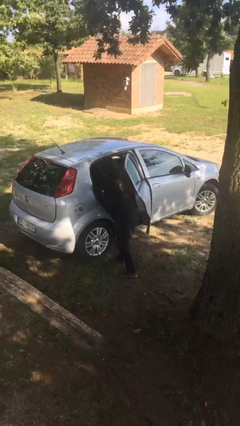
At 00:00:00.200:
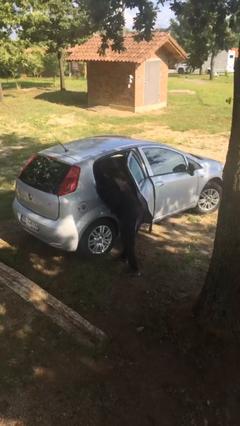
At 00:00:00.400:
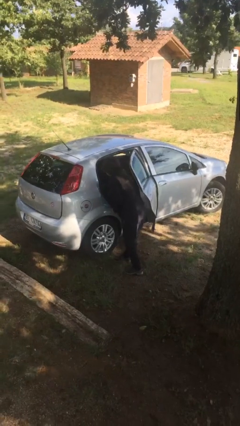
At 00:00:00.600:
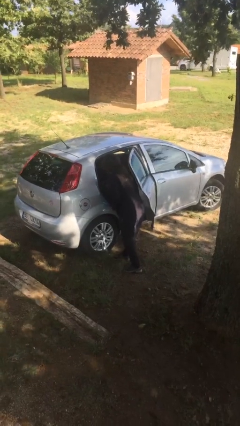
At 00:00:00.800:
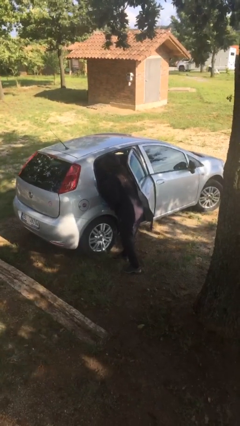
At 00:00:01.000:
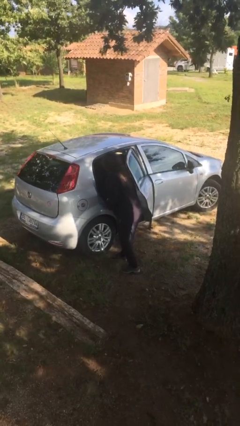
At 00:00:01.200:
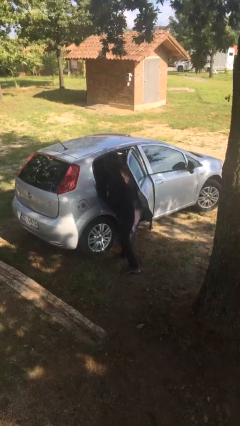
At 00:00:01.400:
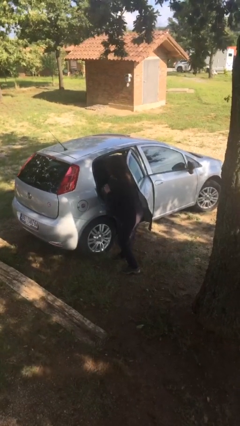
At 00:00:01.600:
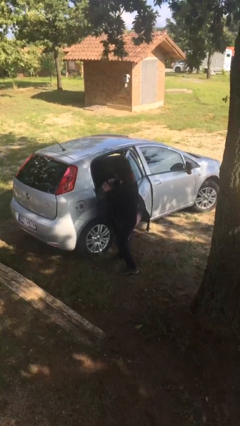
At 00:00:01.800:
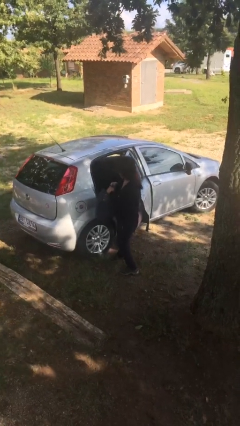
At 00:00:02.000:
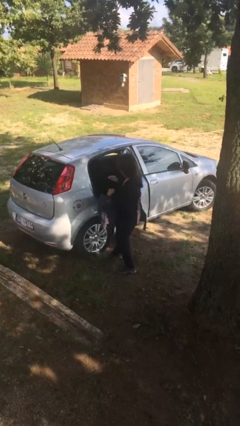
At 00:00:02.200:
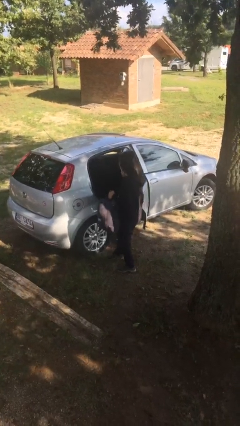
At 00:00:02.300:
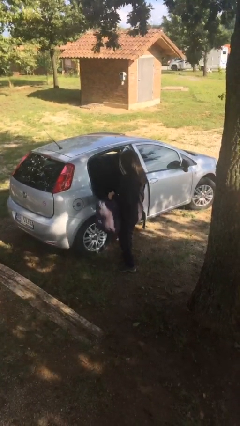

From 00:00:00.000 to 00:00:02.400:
person unloads car

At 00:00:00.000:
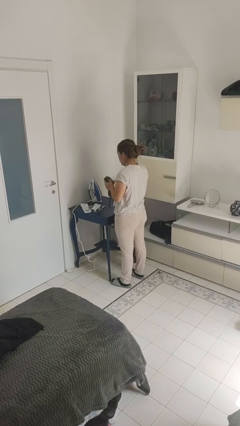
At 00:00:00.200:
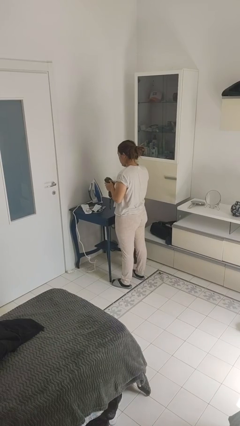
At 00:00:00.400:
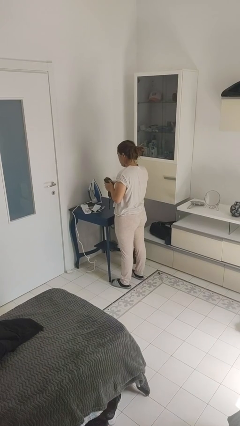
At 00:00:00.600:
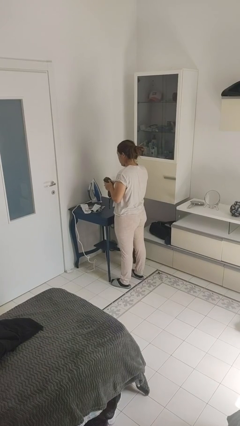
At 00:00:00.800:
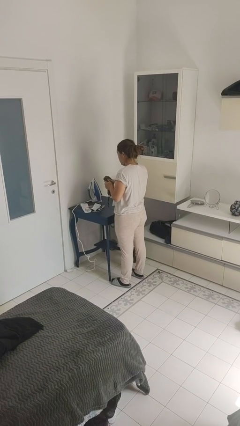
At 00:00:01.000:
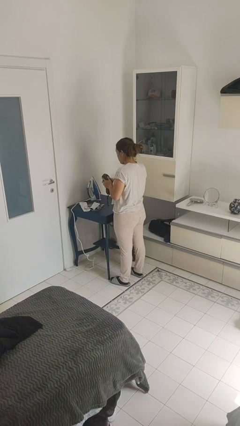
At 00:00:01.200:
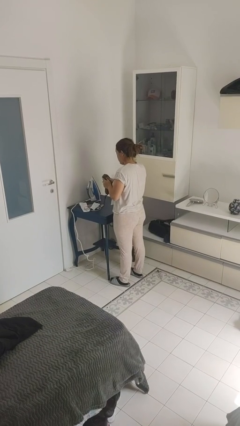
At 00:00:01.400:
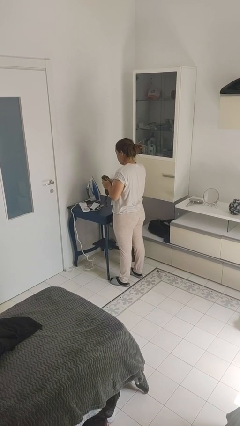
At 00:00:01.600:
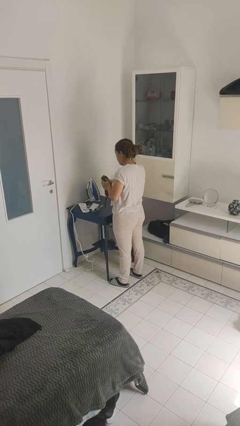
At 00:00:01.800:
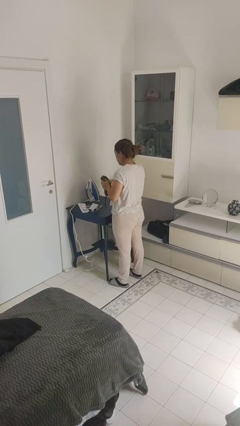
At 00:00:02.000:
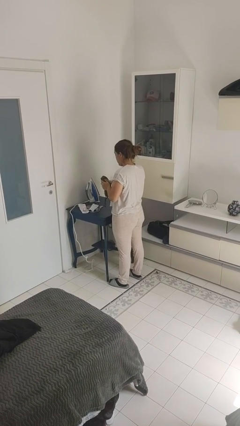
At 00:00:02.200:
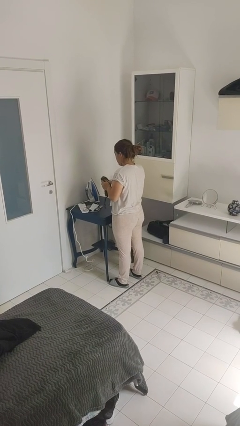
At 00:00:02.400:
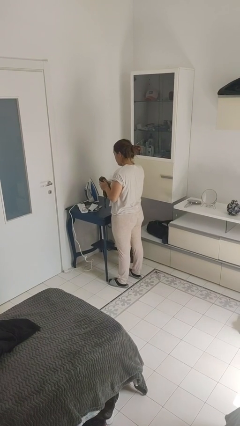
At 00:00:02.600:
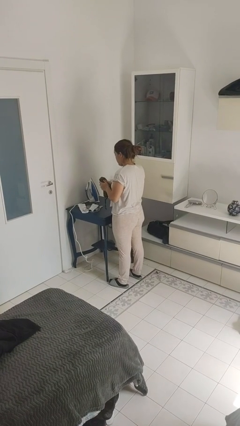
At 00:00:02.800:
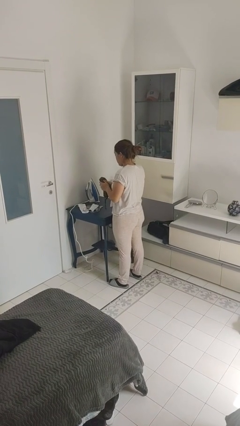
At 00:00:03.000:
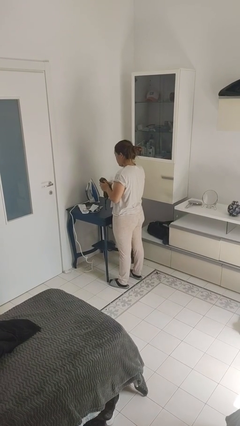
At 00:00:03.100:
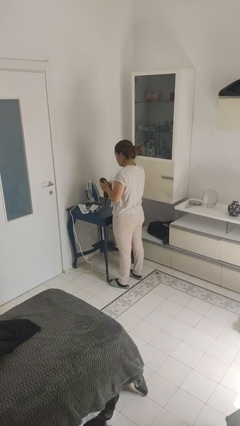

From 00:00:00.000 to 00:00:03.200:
person squeezes object

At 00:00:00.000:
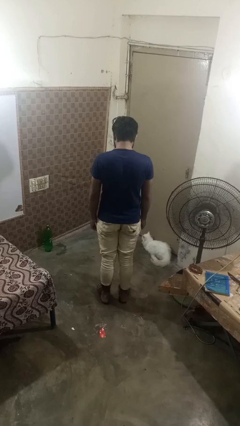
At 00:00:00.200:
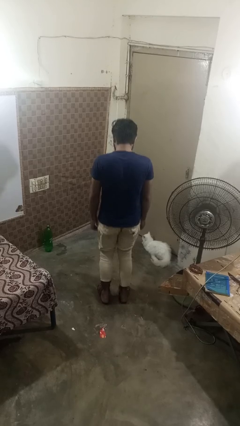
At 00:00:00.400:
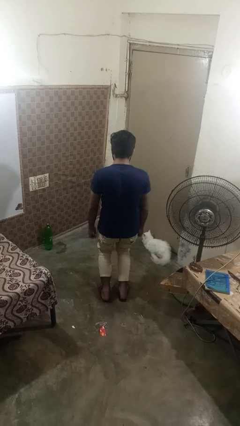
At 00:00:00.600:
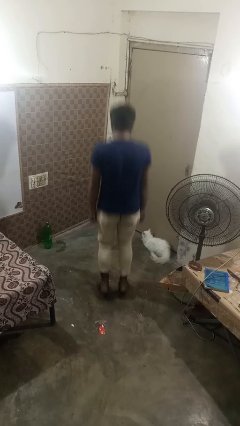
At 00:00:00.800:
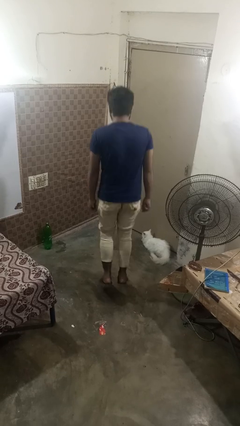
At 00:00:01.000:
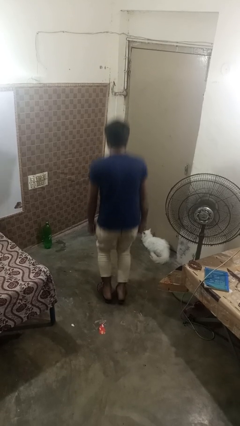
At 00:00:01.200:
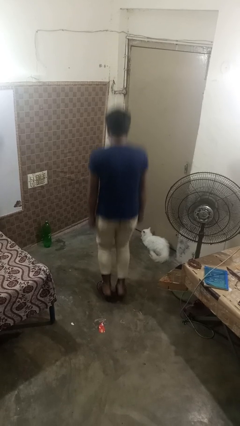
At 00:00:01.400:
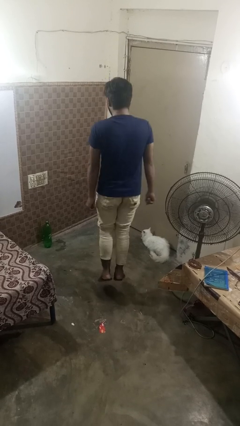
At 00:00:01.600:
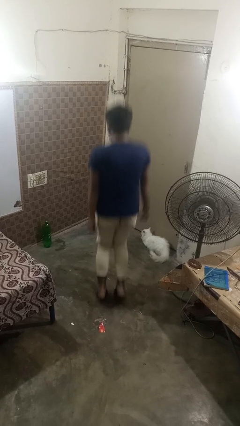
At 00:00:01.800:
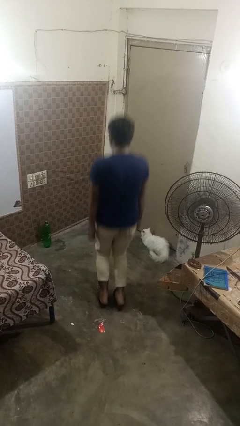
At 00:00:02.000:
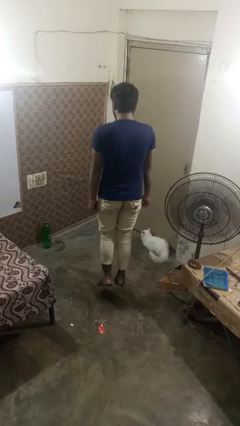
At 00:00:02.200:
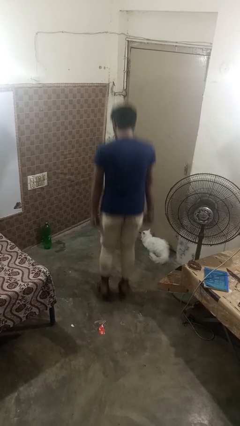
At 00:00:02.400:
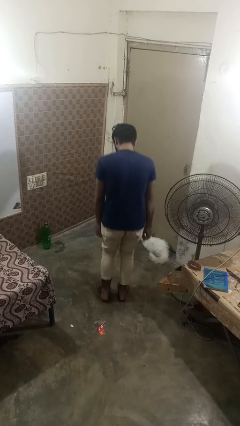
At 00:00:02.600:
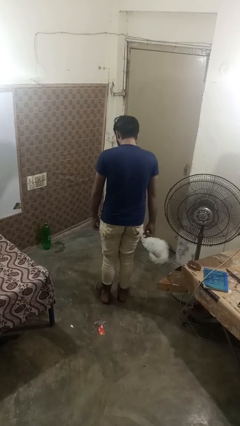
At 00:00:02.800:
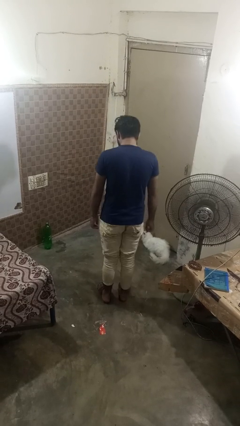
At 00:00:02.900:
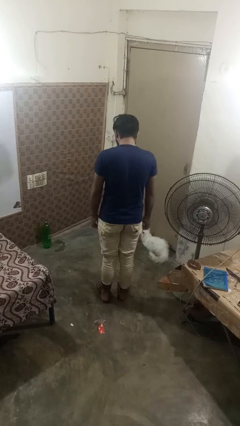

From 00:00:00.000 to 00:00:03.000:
person jumps

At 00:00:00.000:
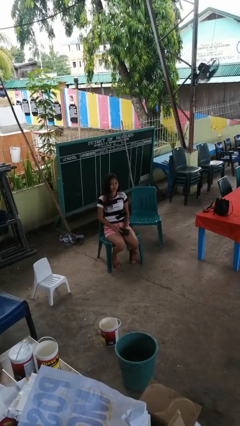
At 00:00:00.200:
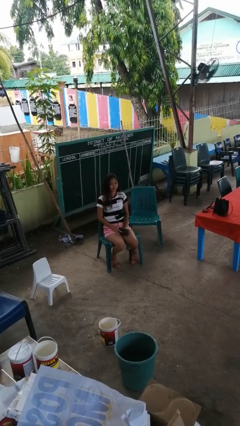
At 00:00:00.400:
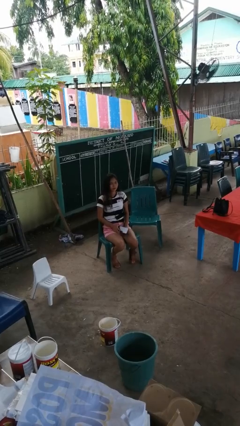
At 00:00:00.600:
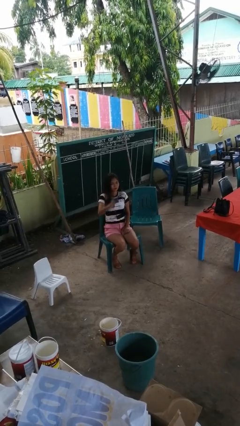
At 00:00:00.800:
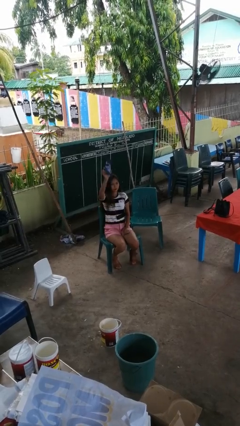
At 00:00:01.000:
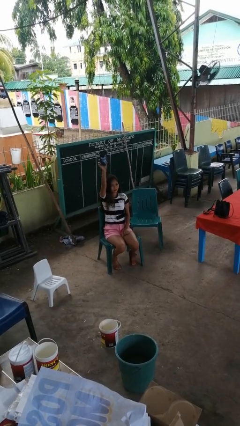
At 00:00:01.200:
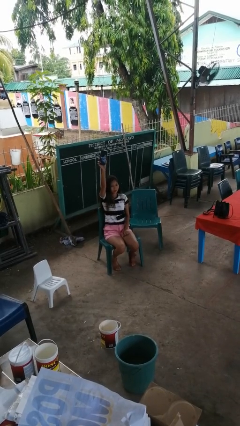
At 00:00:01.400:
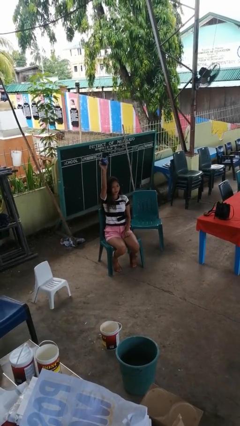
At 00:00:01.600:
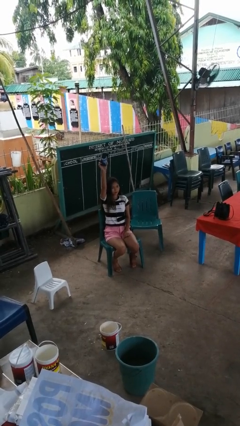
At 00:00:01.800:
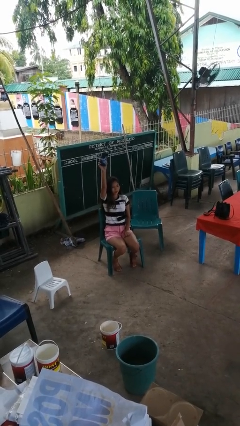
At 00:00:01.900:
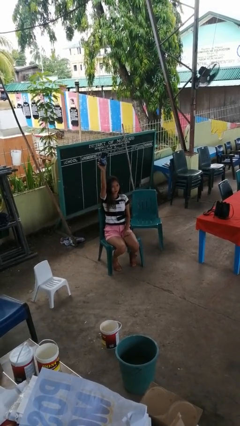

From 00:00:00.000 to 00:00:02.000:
person holds object above head

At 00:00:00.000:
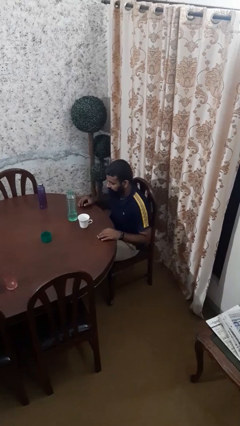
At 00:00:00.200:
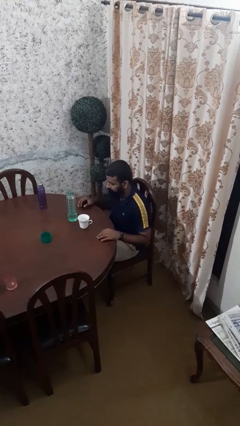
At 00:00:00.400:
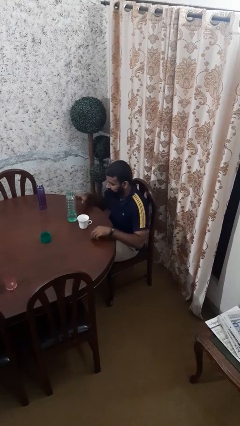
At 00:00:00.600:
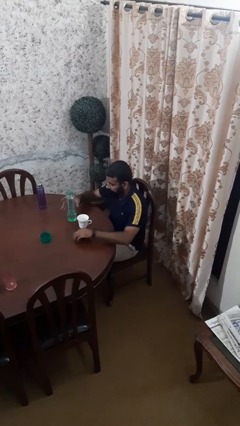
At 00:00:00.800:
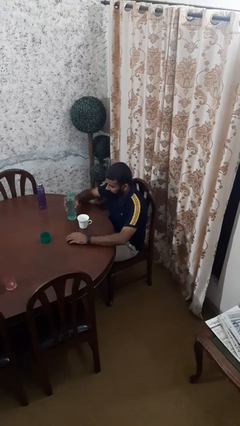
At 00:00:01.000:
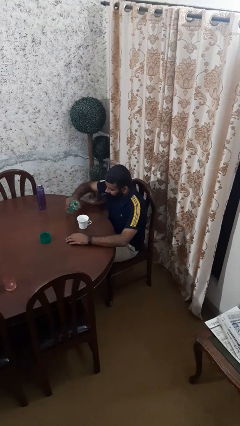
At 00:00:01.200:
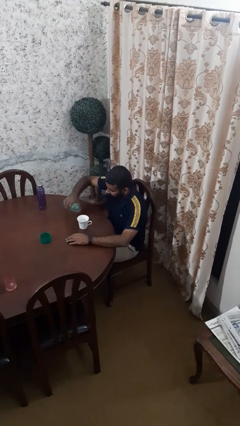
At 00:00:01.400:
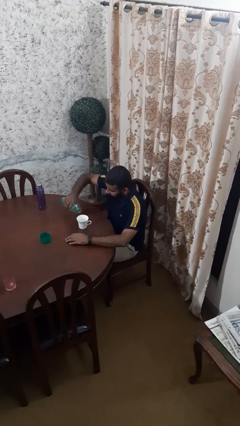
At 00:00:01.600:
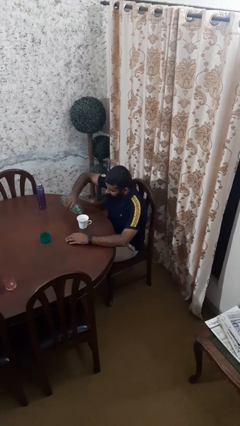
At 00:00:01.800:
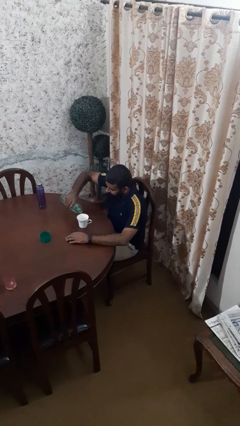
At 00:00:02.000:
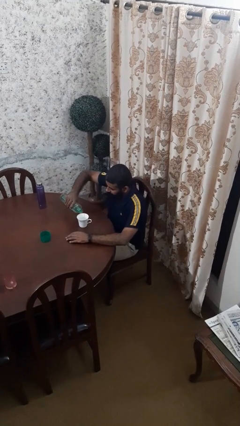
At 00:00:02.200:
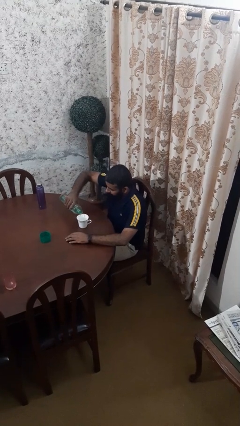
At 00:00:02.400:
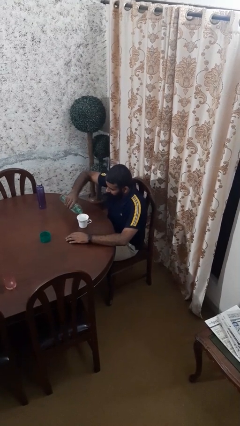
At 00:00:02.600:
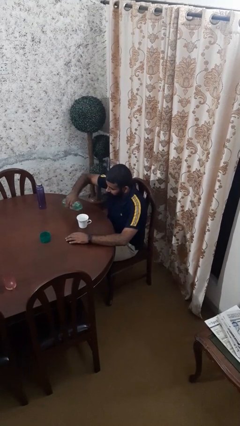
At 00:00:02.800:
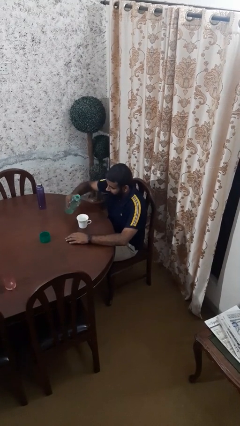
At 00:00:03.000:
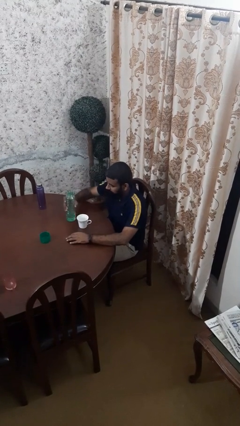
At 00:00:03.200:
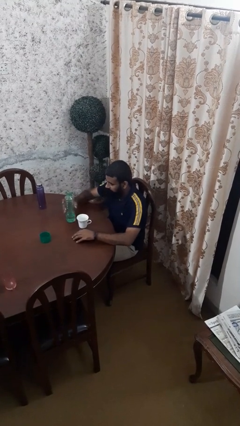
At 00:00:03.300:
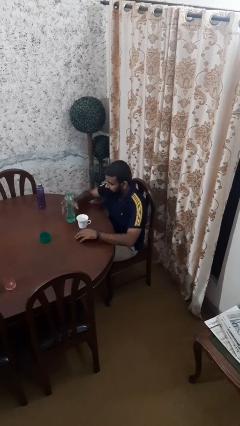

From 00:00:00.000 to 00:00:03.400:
person pours liquid into cup

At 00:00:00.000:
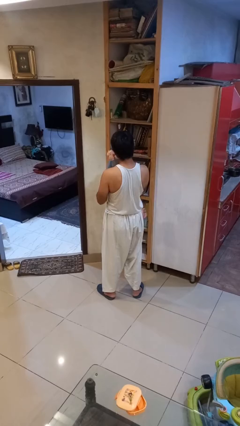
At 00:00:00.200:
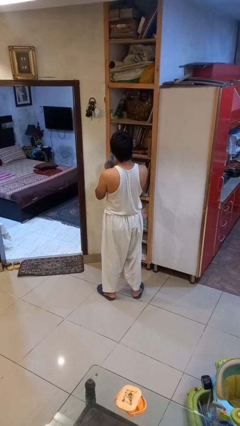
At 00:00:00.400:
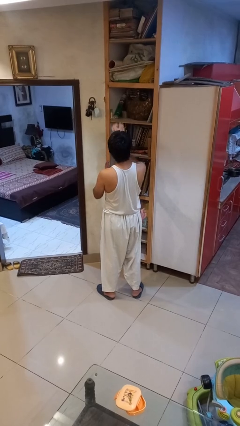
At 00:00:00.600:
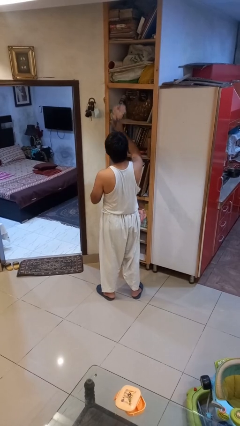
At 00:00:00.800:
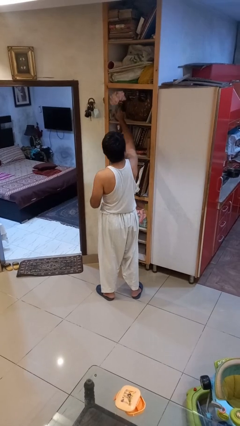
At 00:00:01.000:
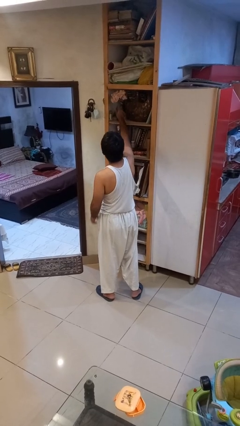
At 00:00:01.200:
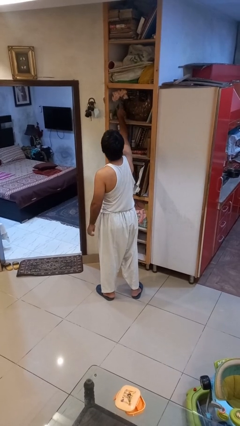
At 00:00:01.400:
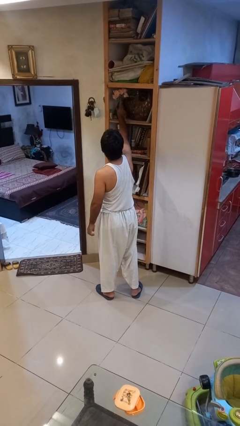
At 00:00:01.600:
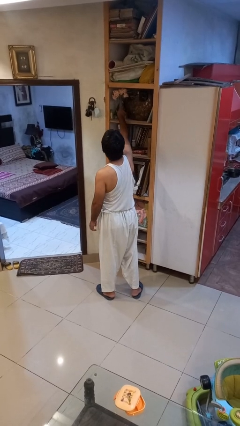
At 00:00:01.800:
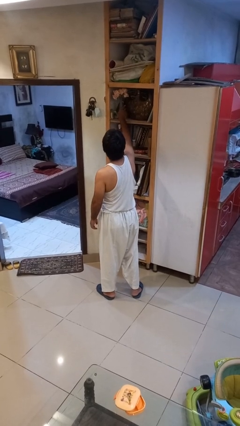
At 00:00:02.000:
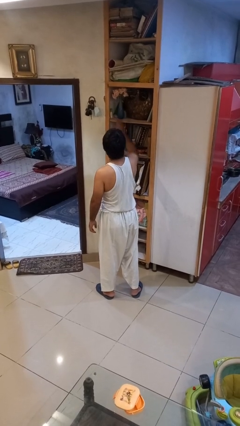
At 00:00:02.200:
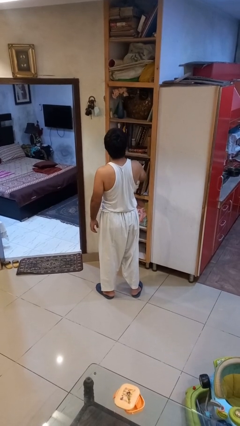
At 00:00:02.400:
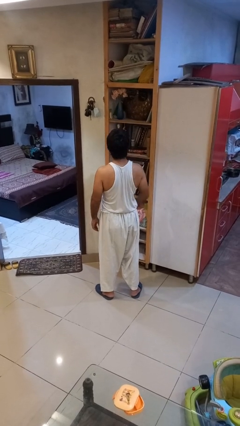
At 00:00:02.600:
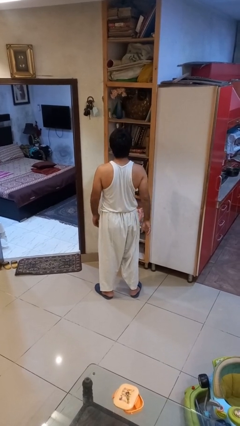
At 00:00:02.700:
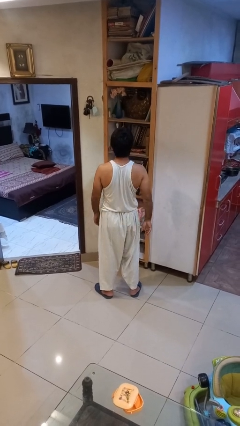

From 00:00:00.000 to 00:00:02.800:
person puts down object on shelf
